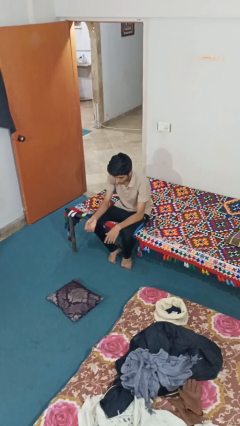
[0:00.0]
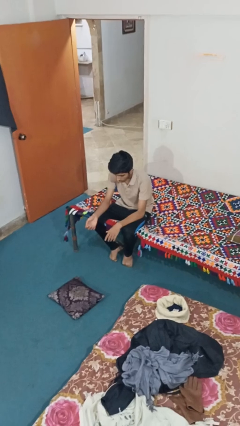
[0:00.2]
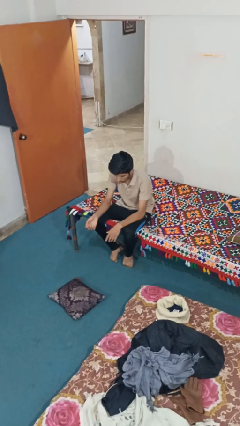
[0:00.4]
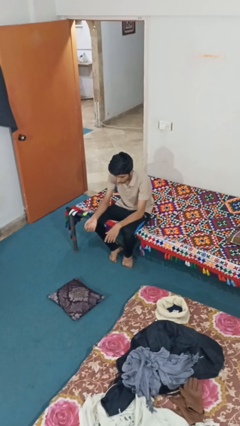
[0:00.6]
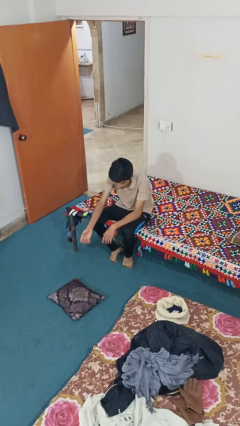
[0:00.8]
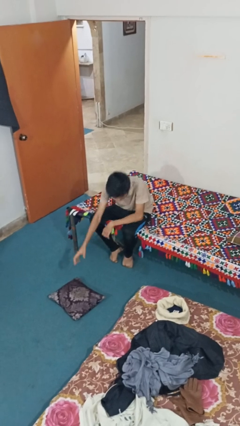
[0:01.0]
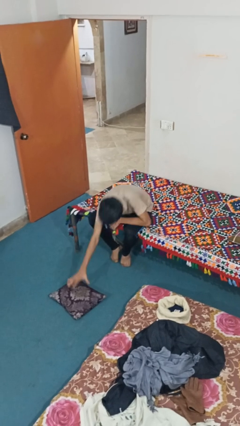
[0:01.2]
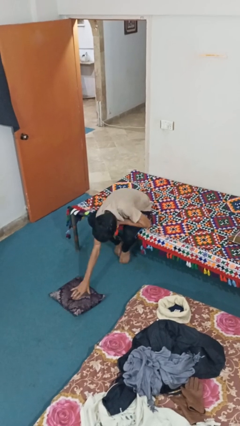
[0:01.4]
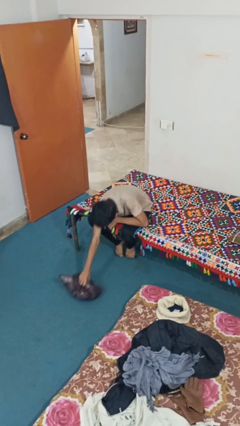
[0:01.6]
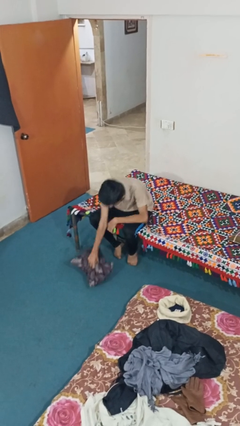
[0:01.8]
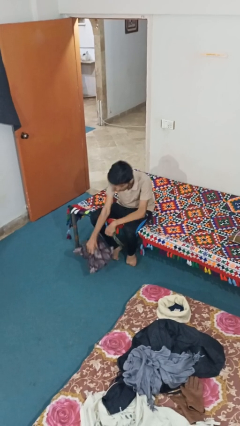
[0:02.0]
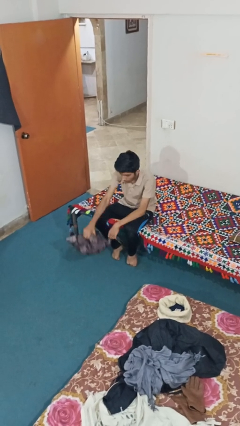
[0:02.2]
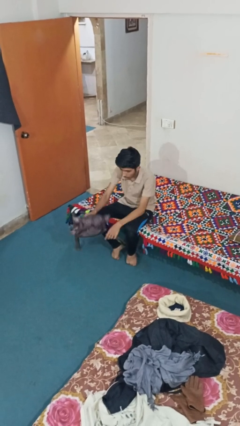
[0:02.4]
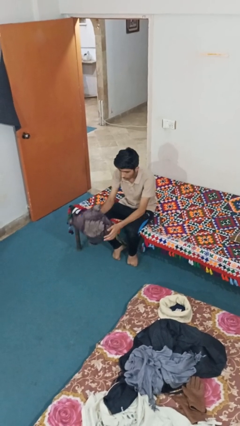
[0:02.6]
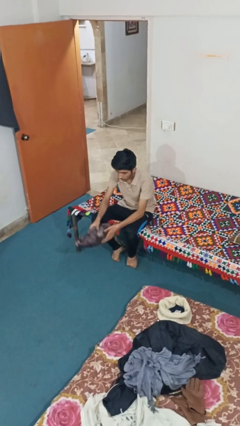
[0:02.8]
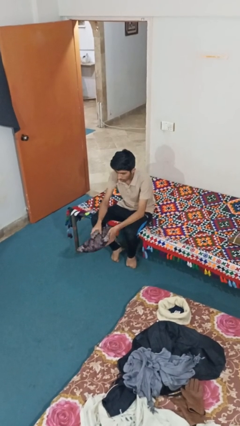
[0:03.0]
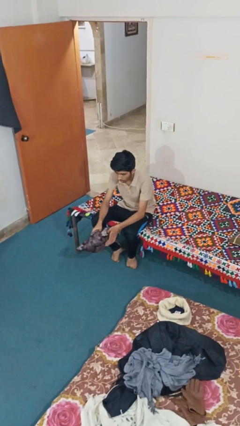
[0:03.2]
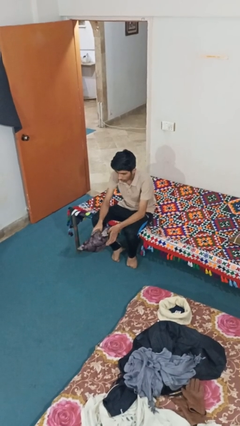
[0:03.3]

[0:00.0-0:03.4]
person picks up object from floor

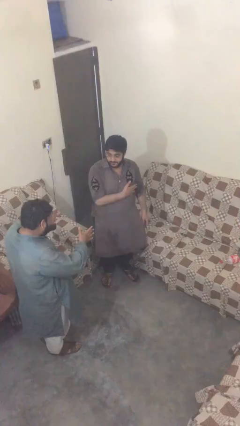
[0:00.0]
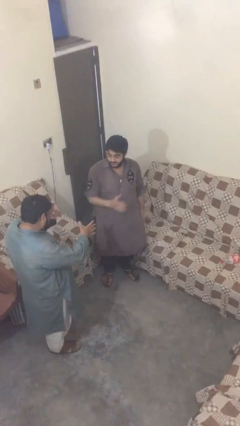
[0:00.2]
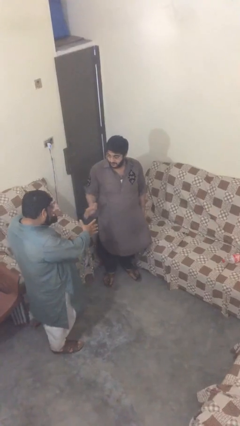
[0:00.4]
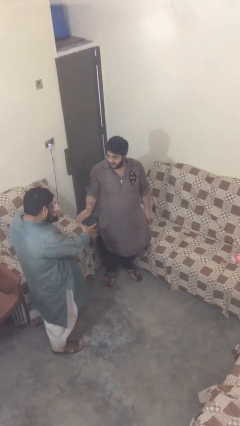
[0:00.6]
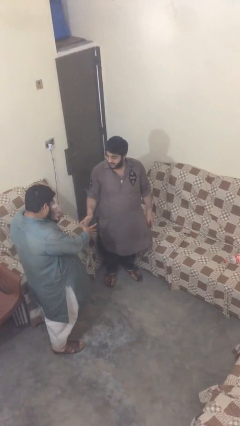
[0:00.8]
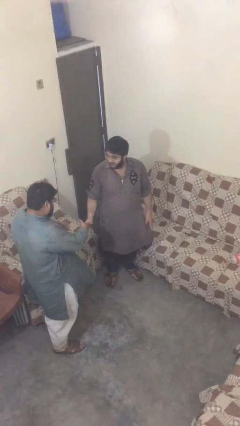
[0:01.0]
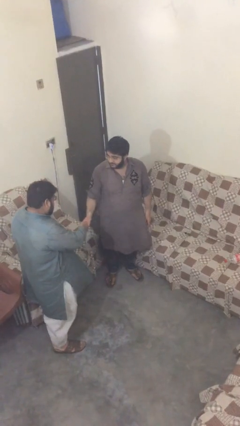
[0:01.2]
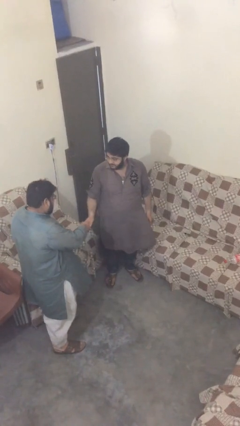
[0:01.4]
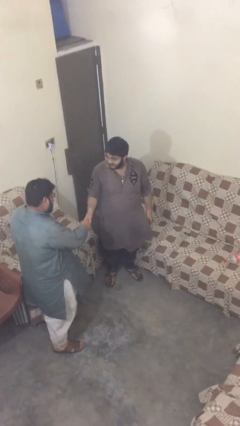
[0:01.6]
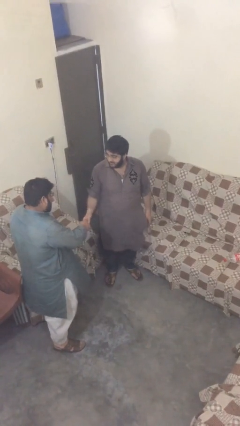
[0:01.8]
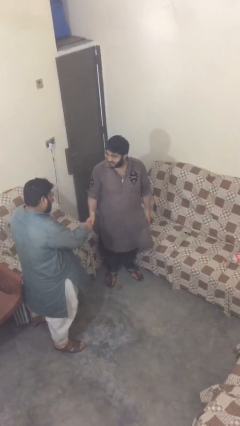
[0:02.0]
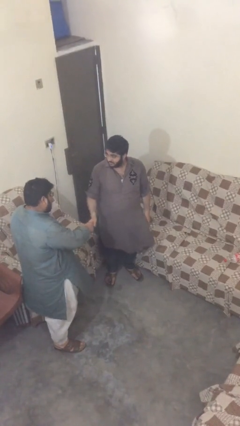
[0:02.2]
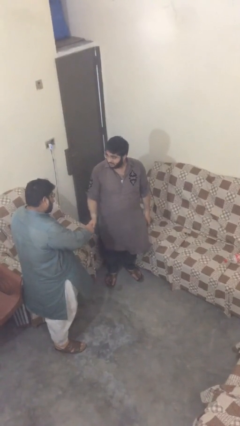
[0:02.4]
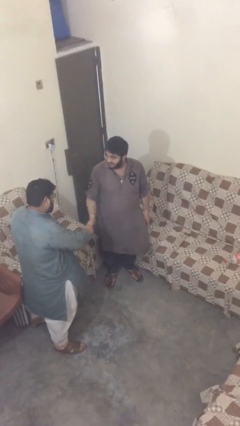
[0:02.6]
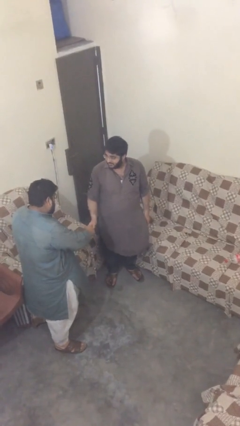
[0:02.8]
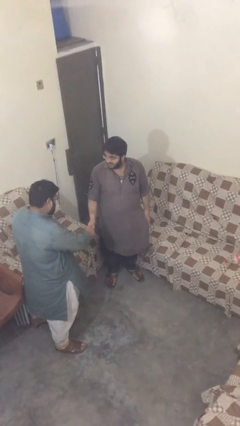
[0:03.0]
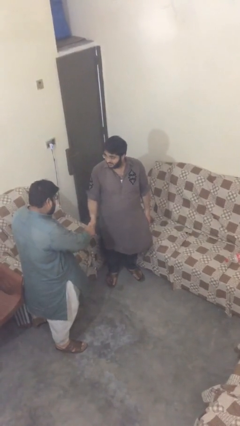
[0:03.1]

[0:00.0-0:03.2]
person shakes hand

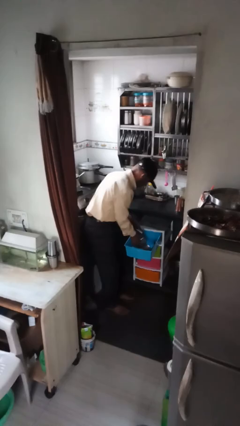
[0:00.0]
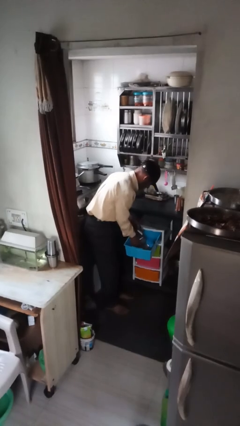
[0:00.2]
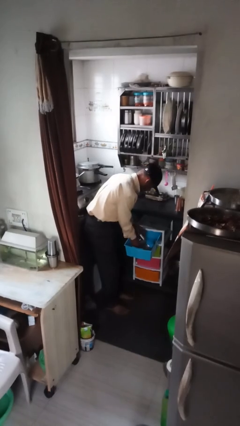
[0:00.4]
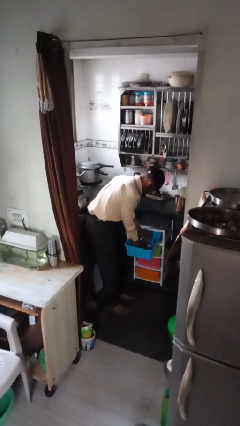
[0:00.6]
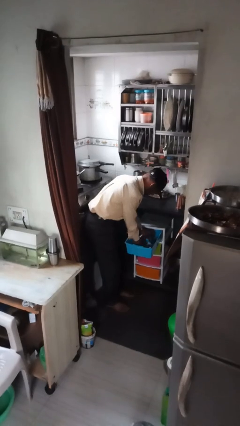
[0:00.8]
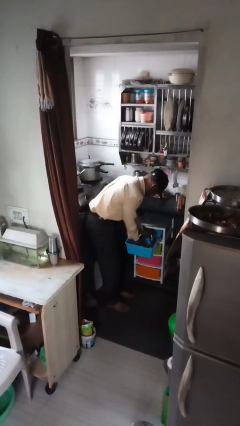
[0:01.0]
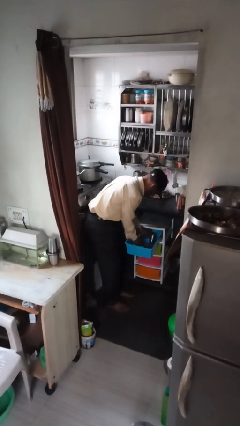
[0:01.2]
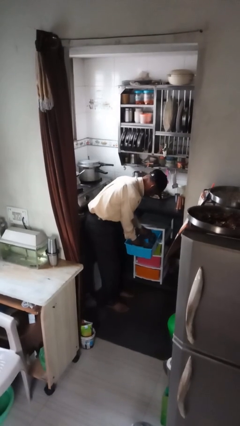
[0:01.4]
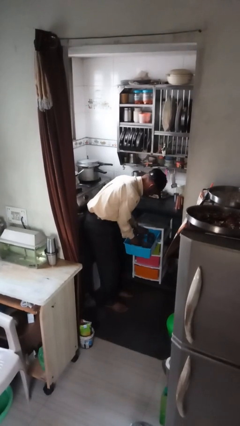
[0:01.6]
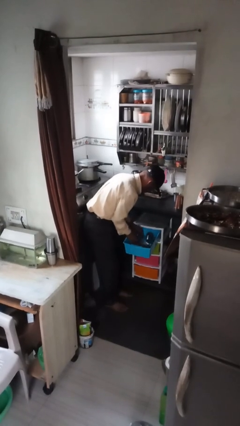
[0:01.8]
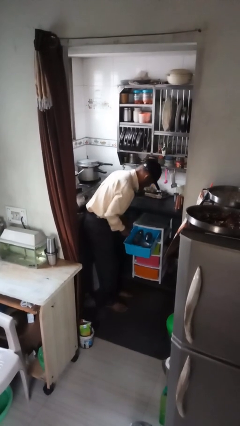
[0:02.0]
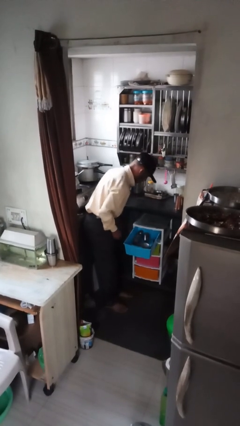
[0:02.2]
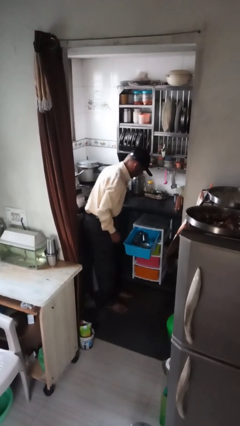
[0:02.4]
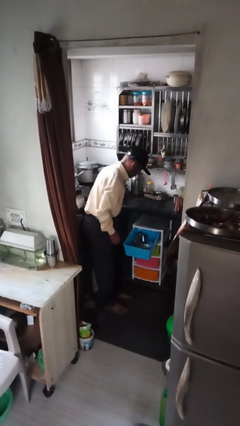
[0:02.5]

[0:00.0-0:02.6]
person puts object into kitchen drawer

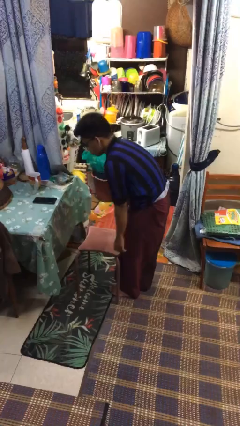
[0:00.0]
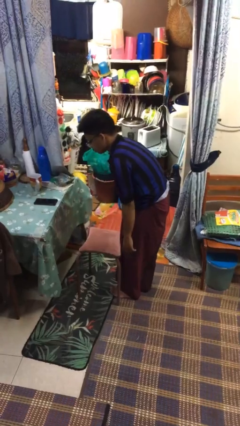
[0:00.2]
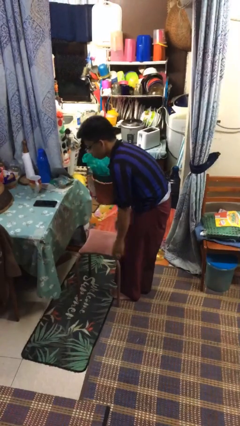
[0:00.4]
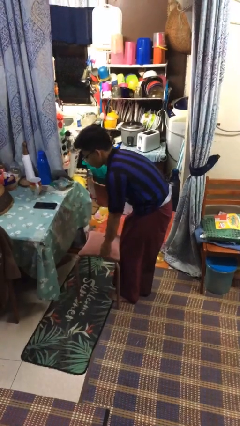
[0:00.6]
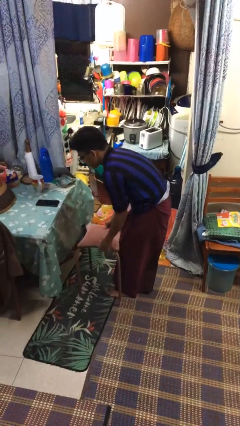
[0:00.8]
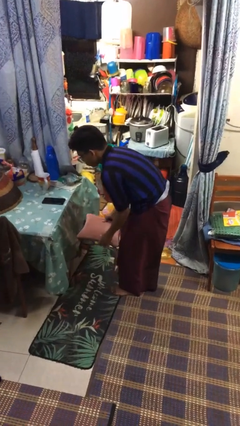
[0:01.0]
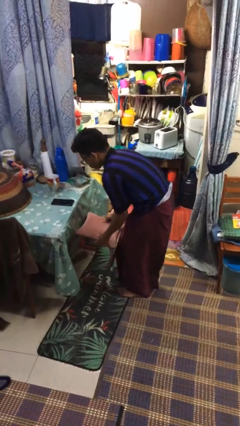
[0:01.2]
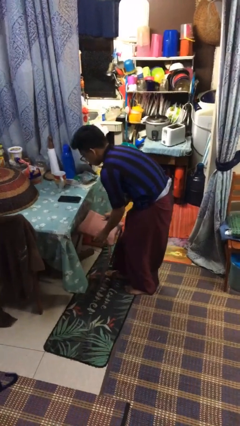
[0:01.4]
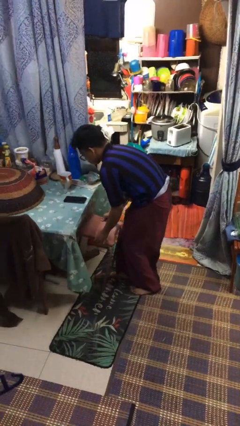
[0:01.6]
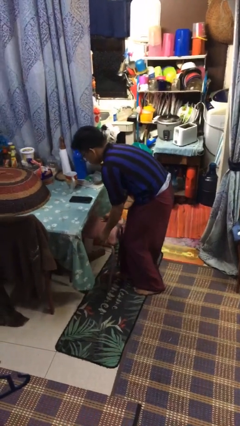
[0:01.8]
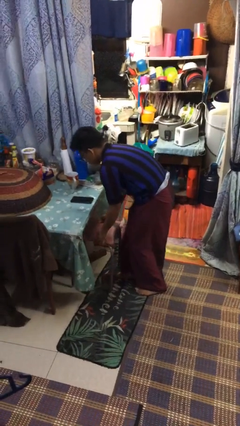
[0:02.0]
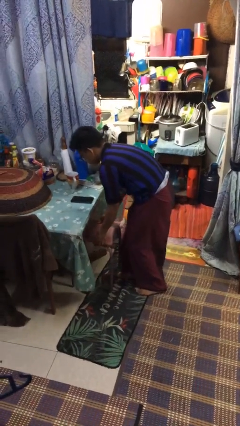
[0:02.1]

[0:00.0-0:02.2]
person pushes in chair

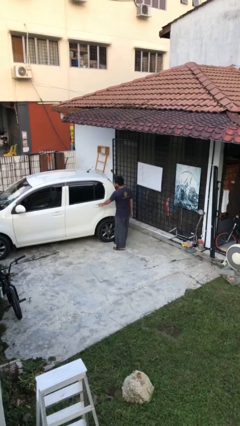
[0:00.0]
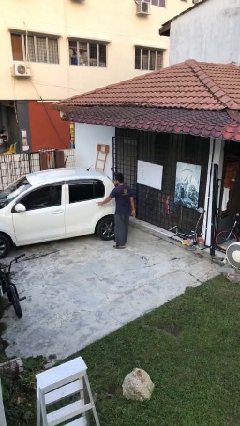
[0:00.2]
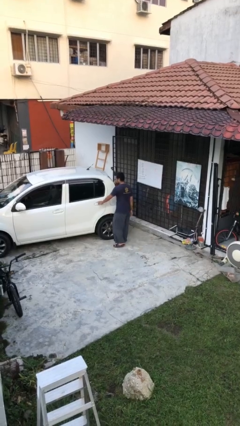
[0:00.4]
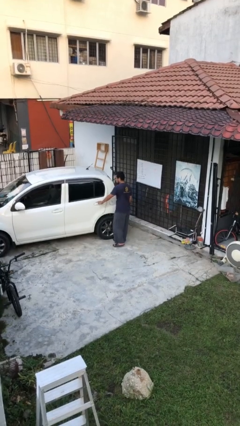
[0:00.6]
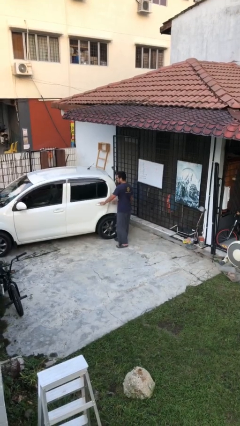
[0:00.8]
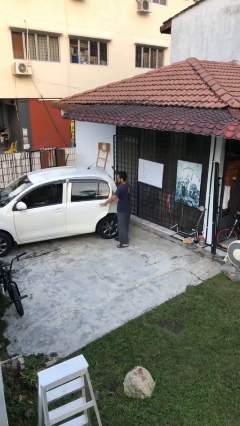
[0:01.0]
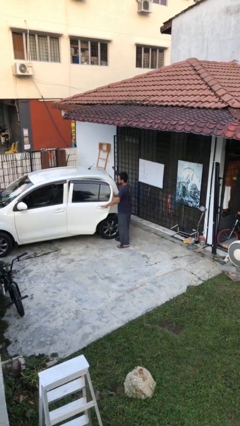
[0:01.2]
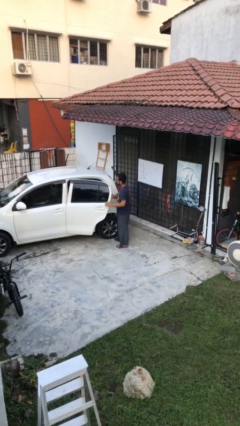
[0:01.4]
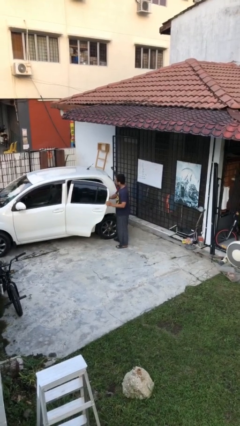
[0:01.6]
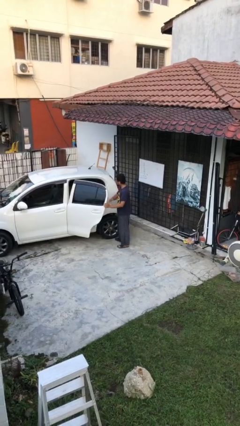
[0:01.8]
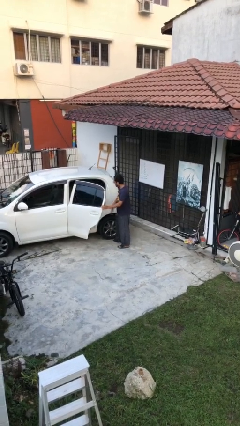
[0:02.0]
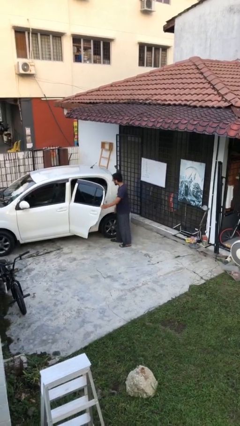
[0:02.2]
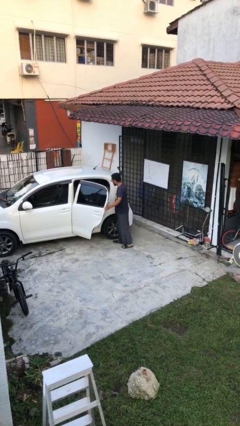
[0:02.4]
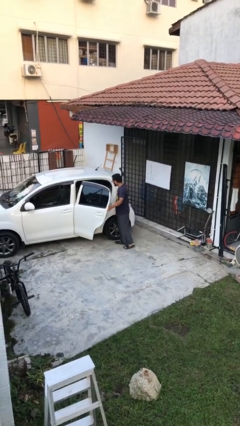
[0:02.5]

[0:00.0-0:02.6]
person opens car door

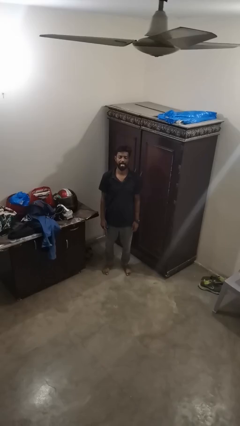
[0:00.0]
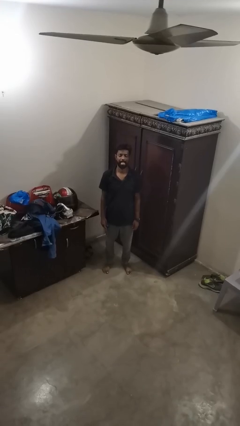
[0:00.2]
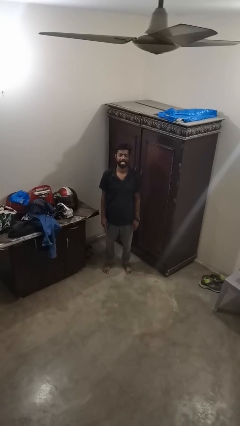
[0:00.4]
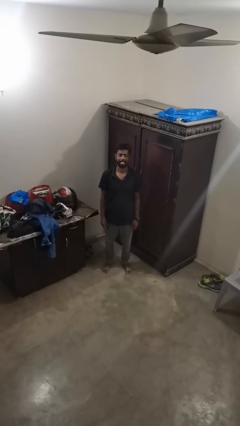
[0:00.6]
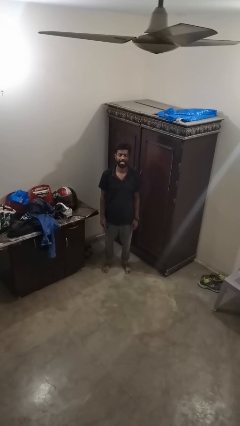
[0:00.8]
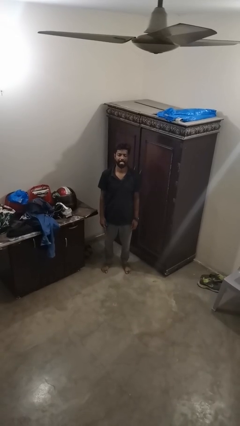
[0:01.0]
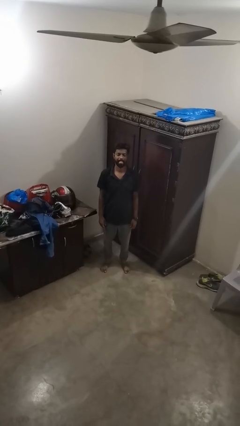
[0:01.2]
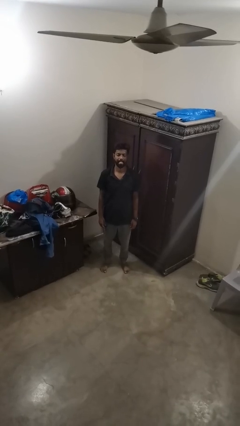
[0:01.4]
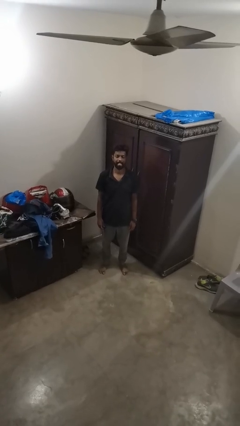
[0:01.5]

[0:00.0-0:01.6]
person sticks out tongue

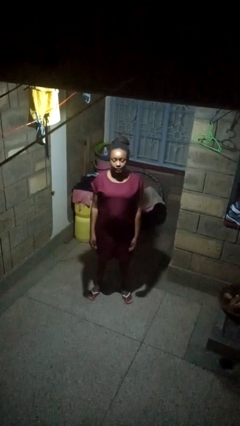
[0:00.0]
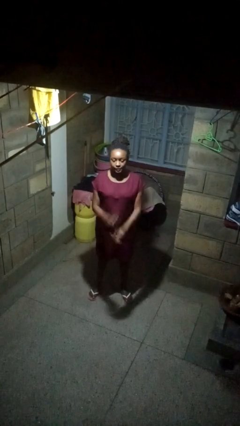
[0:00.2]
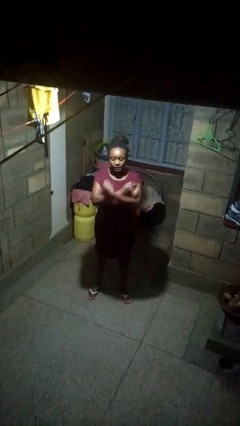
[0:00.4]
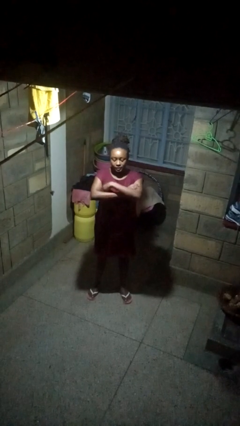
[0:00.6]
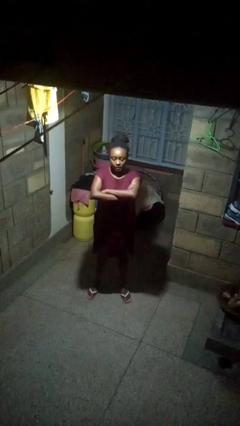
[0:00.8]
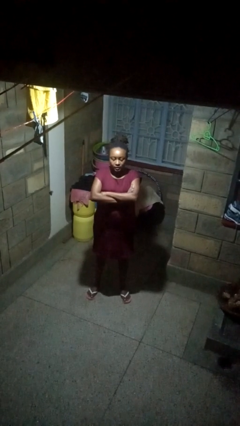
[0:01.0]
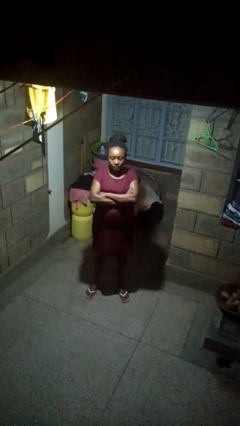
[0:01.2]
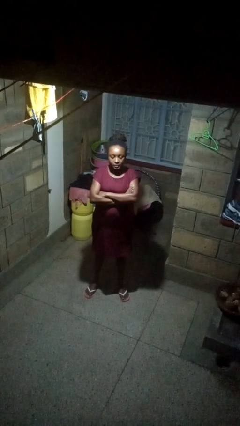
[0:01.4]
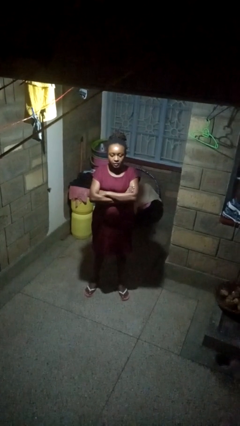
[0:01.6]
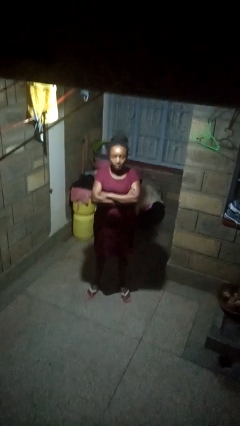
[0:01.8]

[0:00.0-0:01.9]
person crosses arms
